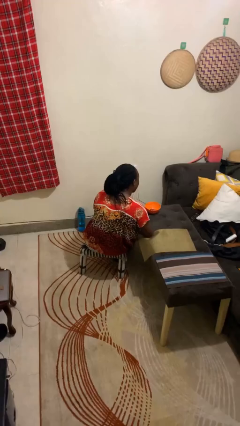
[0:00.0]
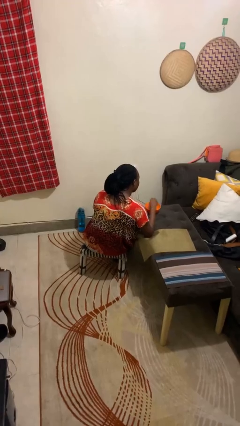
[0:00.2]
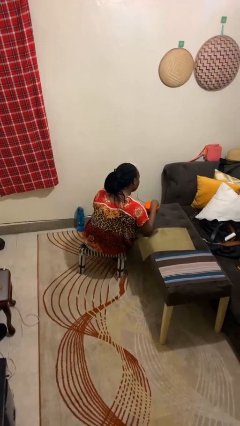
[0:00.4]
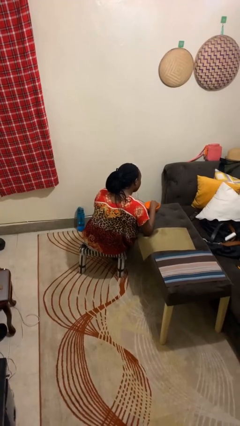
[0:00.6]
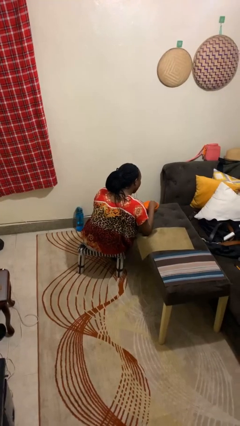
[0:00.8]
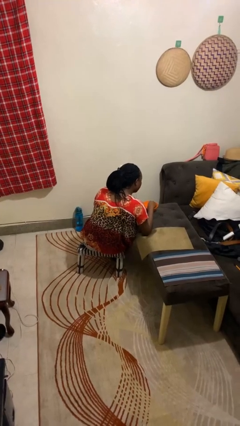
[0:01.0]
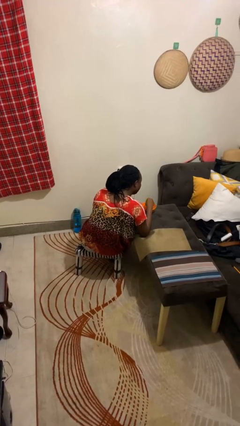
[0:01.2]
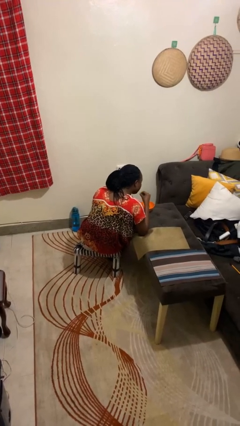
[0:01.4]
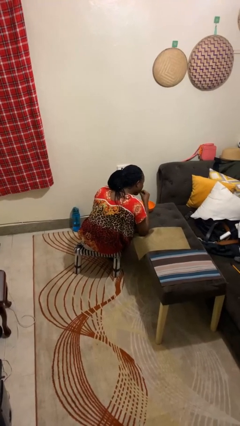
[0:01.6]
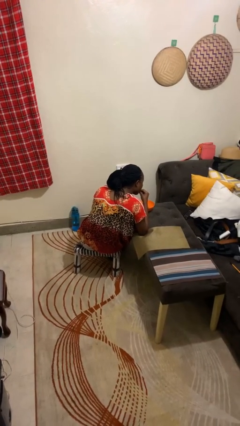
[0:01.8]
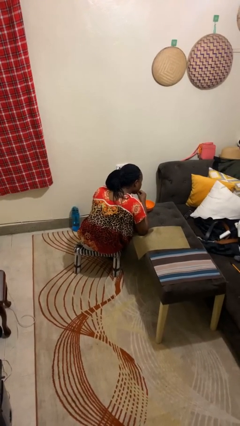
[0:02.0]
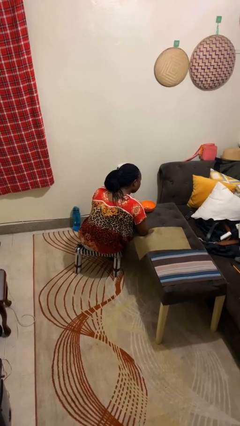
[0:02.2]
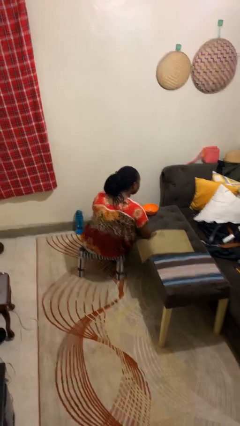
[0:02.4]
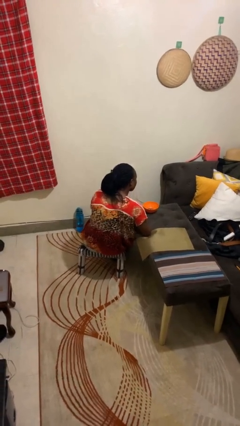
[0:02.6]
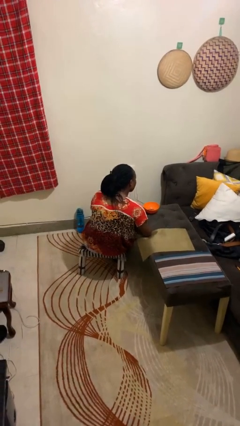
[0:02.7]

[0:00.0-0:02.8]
person eats with hands

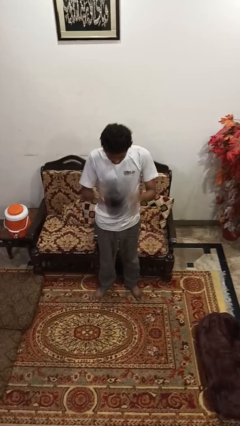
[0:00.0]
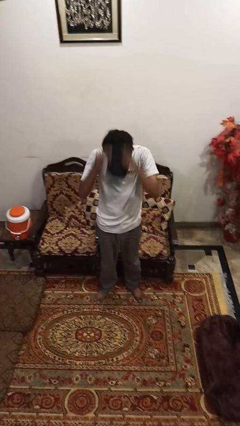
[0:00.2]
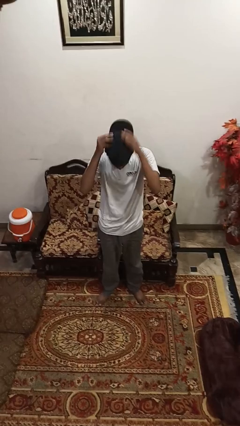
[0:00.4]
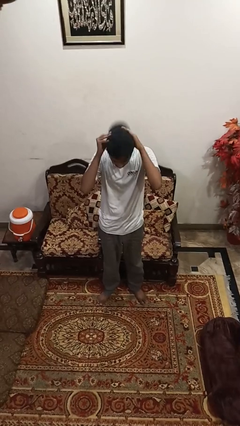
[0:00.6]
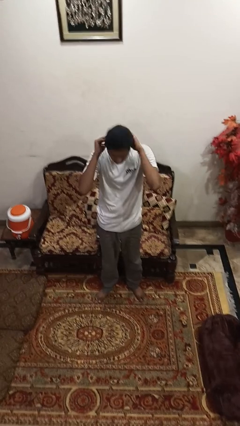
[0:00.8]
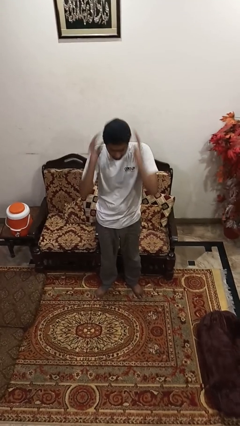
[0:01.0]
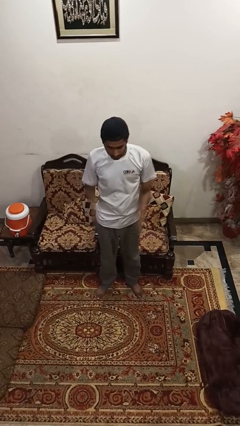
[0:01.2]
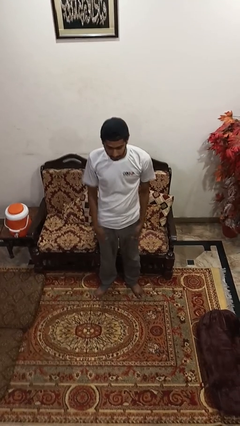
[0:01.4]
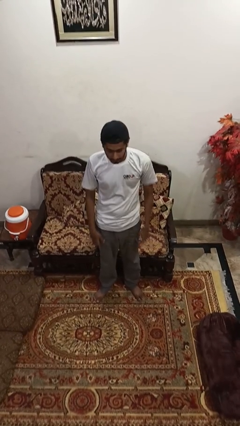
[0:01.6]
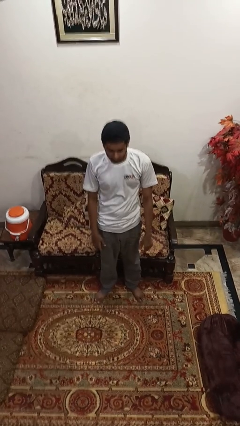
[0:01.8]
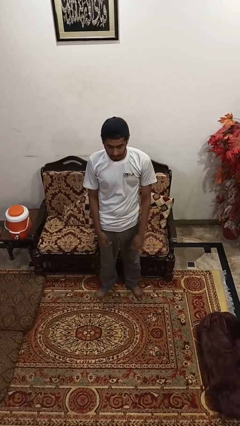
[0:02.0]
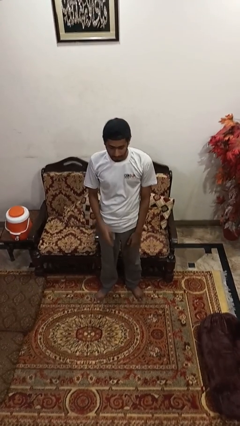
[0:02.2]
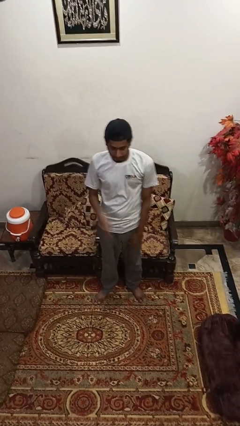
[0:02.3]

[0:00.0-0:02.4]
person puts on hat

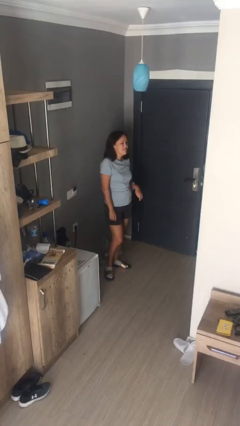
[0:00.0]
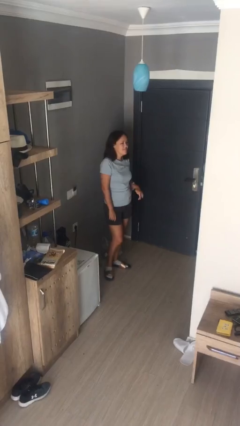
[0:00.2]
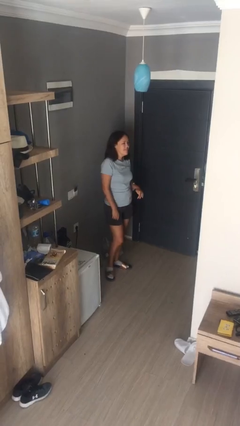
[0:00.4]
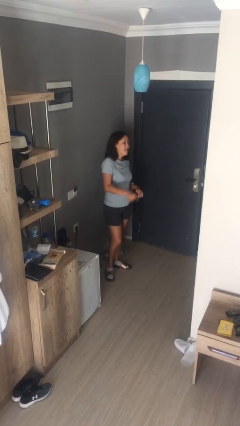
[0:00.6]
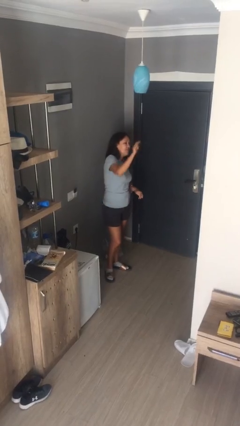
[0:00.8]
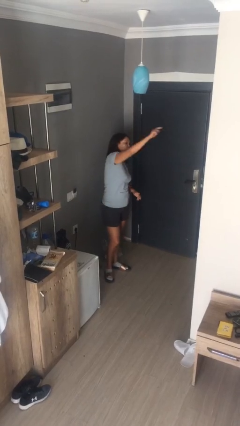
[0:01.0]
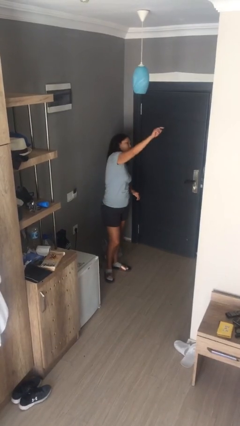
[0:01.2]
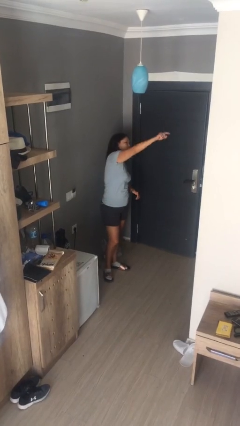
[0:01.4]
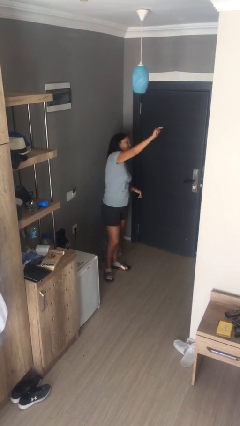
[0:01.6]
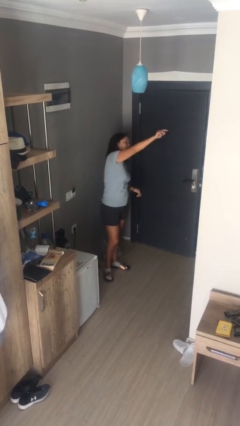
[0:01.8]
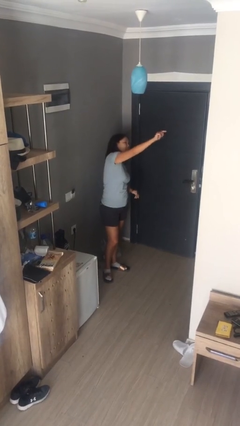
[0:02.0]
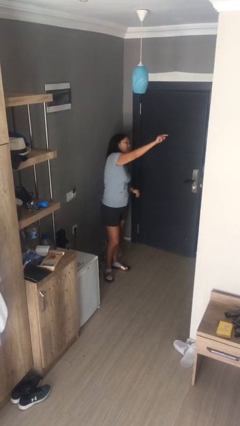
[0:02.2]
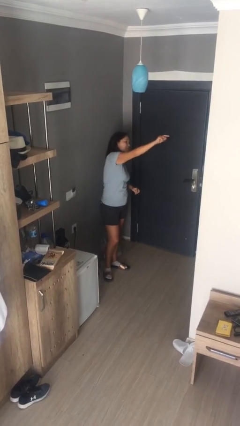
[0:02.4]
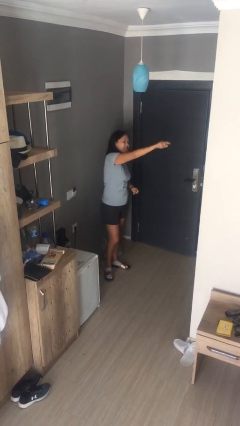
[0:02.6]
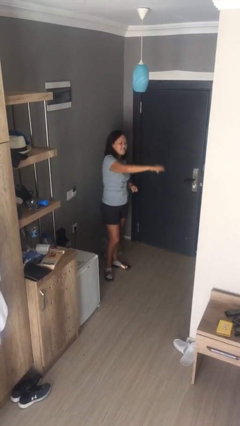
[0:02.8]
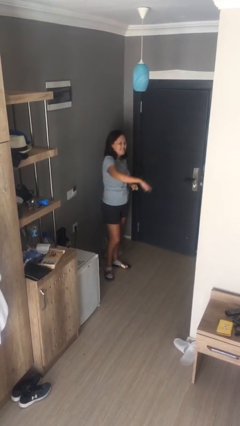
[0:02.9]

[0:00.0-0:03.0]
person points at person

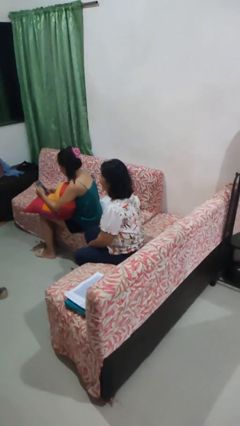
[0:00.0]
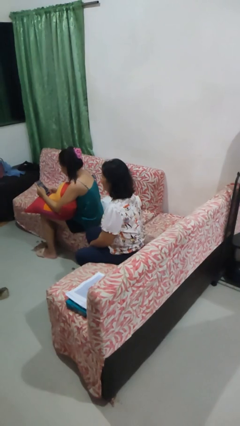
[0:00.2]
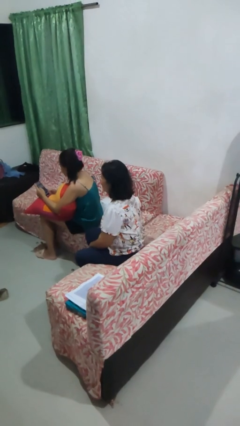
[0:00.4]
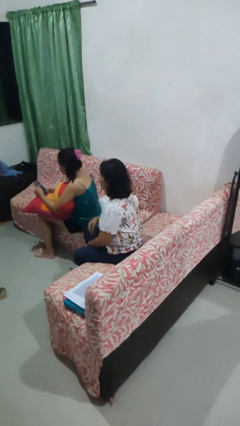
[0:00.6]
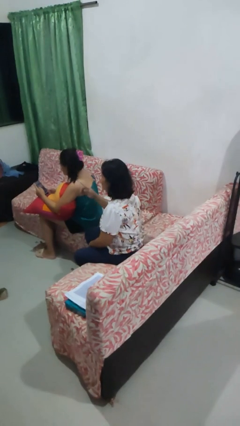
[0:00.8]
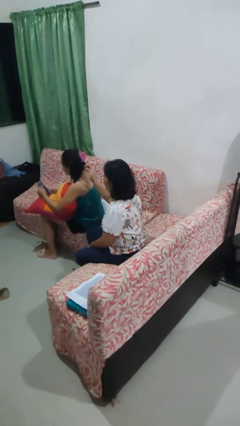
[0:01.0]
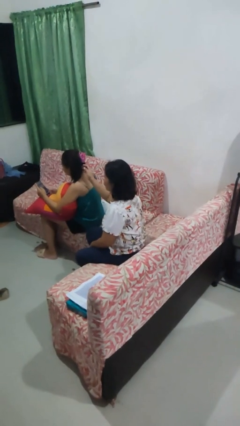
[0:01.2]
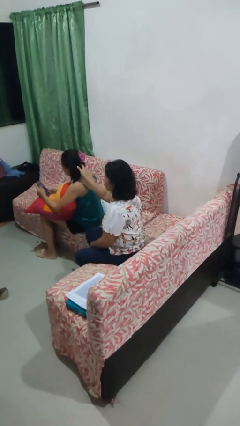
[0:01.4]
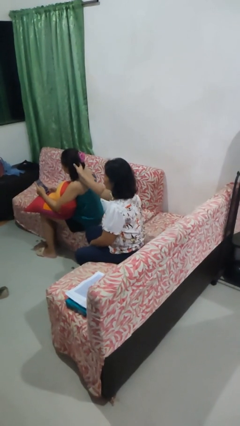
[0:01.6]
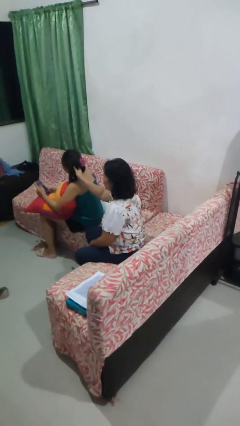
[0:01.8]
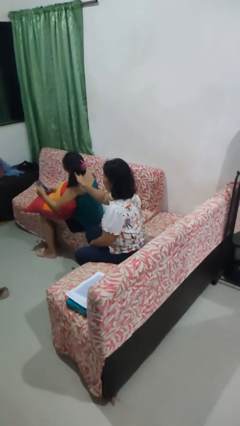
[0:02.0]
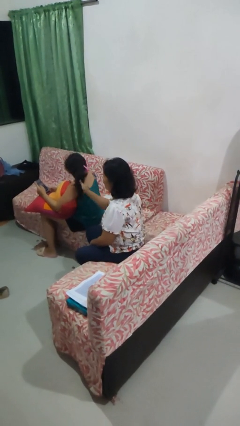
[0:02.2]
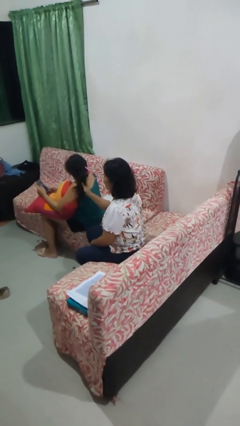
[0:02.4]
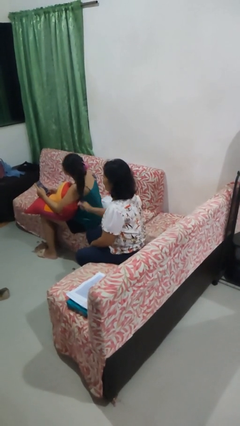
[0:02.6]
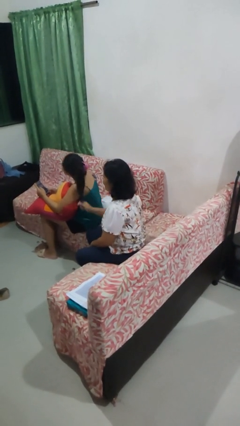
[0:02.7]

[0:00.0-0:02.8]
person grabs person by hair

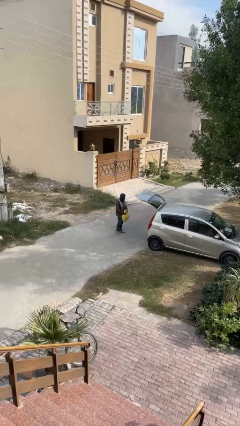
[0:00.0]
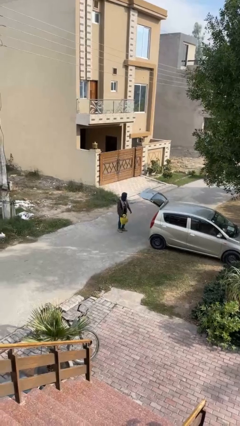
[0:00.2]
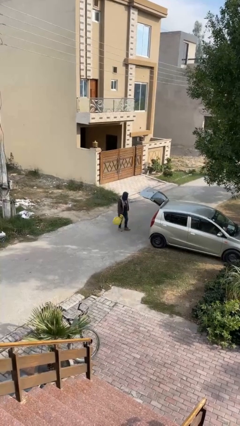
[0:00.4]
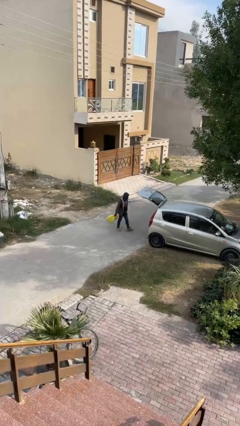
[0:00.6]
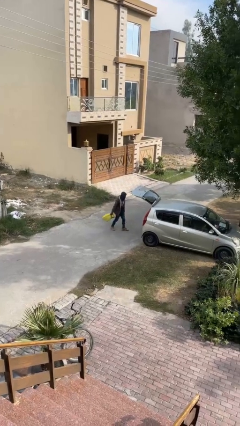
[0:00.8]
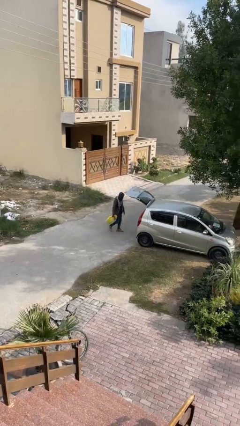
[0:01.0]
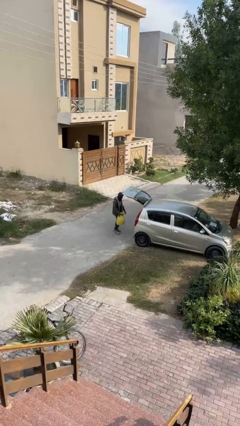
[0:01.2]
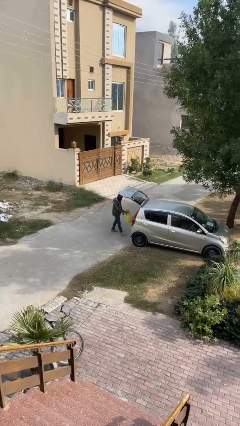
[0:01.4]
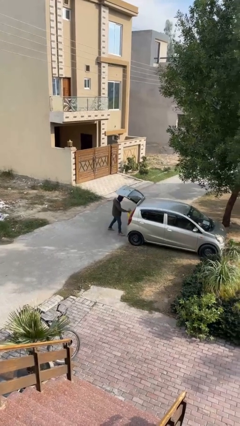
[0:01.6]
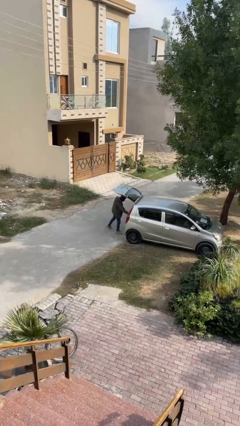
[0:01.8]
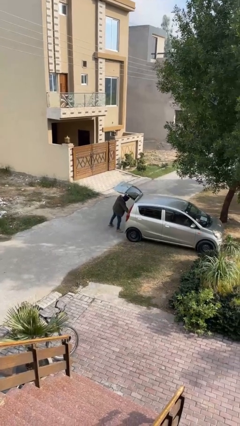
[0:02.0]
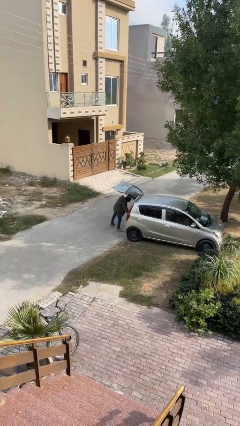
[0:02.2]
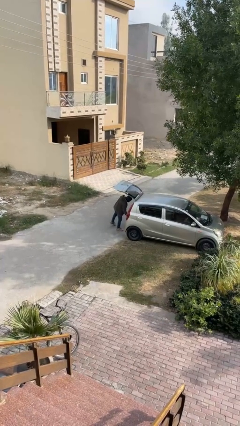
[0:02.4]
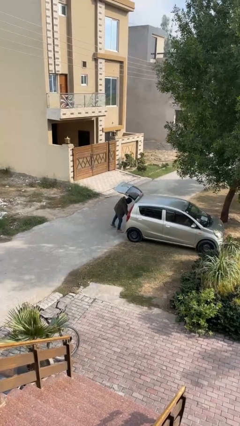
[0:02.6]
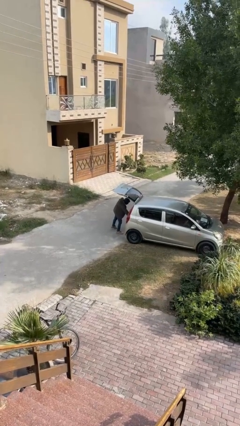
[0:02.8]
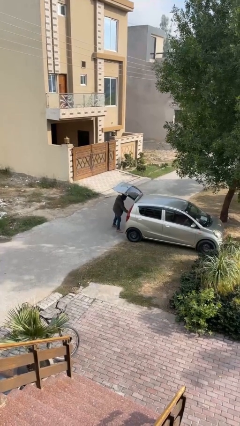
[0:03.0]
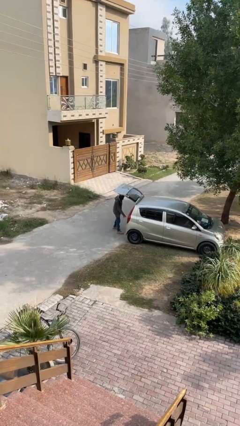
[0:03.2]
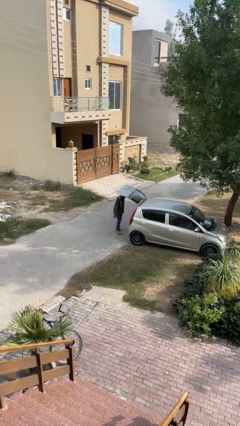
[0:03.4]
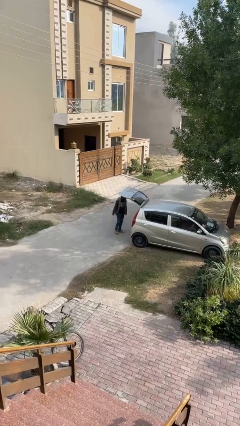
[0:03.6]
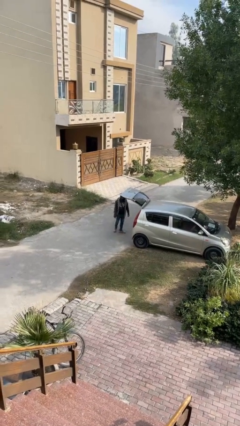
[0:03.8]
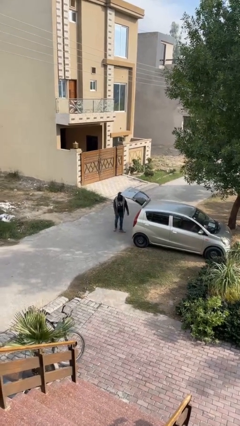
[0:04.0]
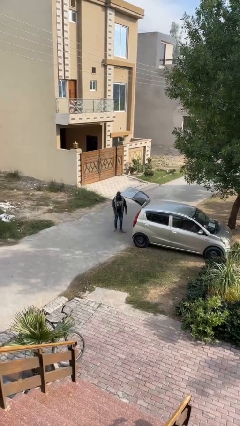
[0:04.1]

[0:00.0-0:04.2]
person loads car

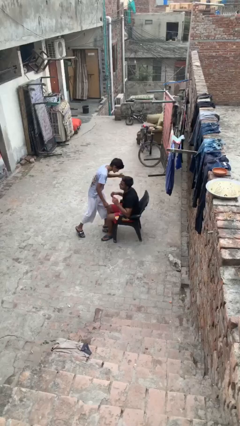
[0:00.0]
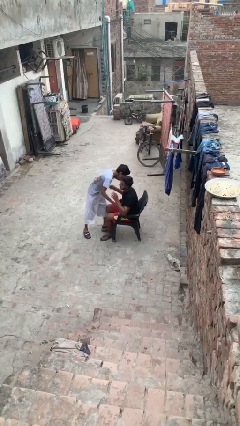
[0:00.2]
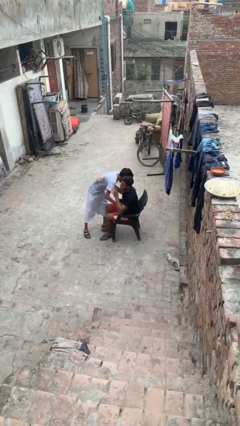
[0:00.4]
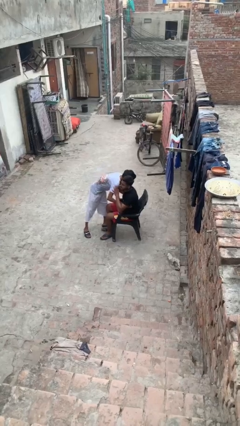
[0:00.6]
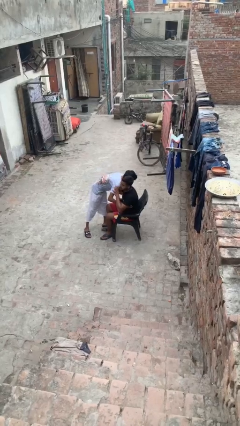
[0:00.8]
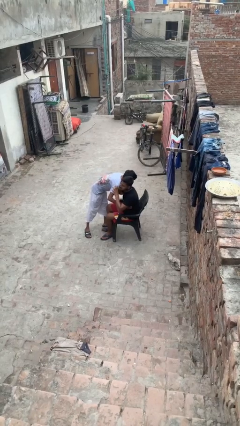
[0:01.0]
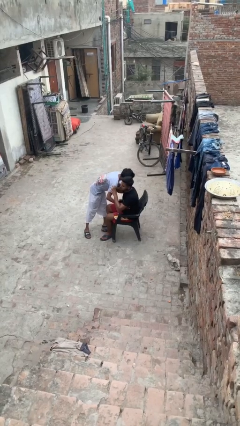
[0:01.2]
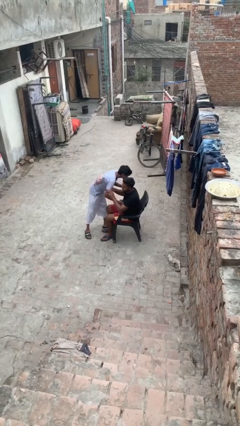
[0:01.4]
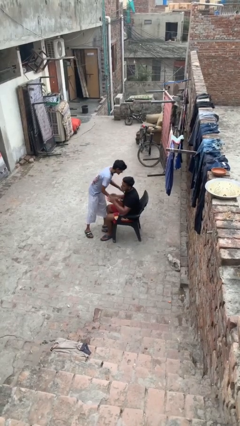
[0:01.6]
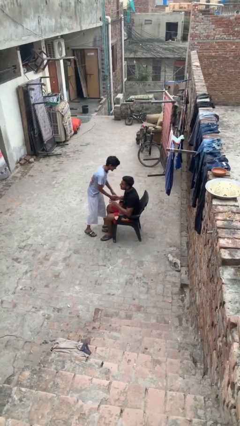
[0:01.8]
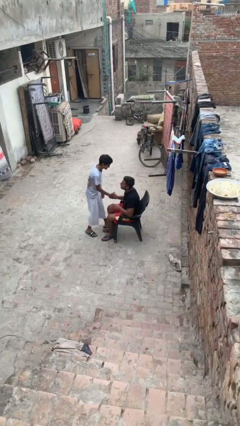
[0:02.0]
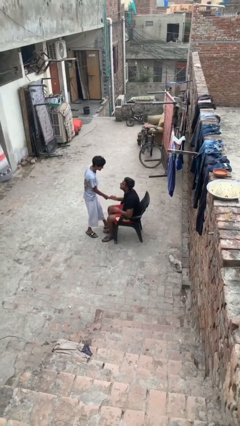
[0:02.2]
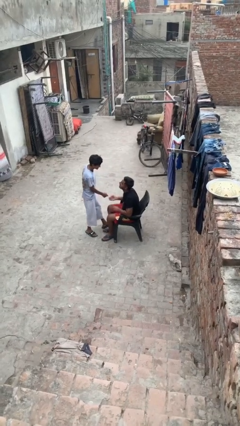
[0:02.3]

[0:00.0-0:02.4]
person embraces person
